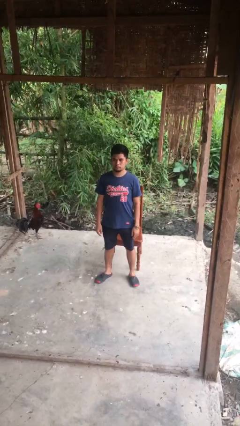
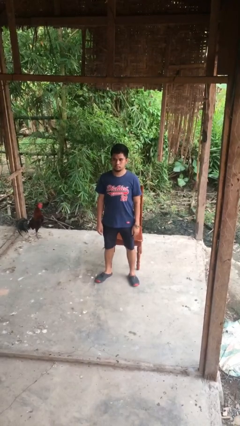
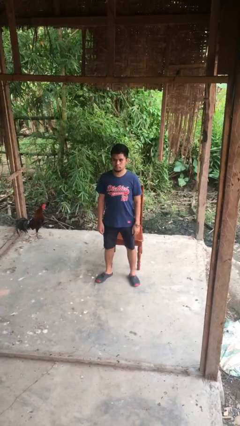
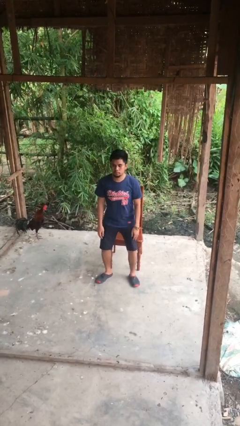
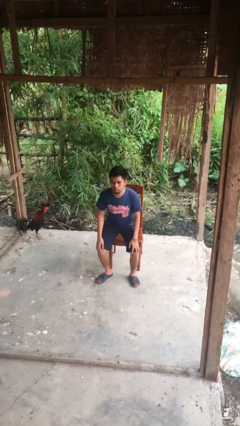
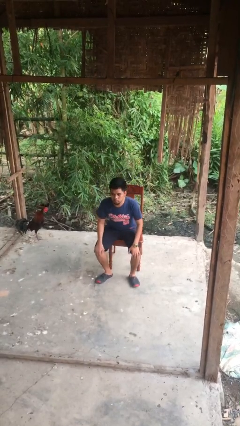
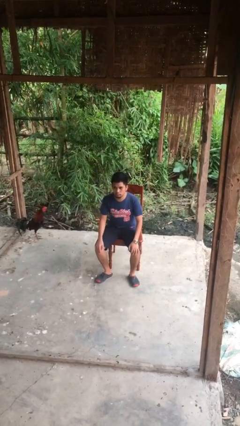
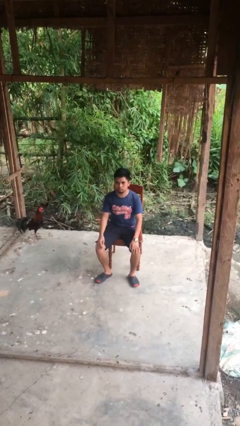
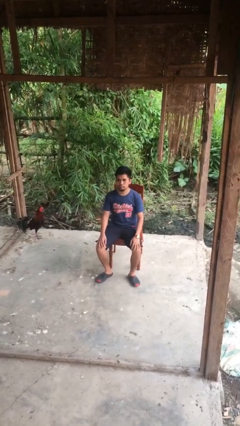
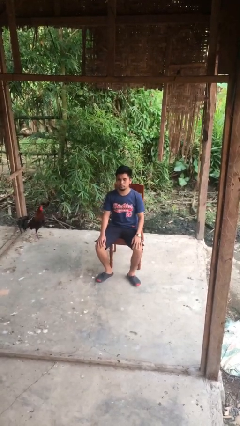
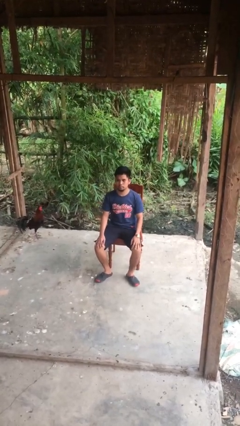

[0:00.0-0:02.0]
person sits down

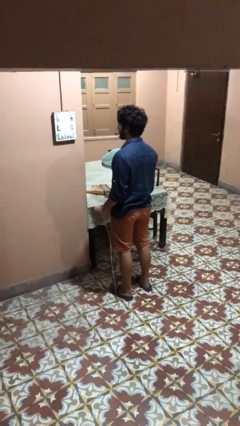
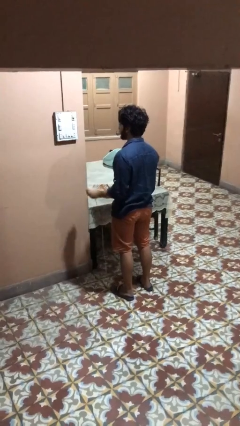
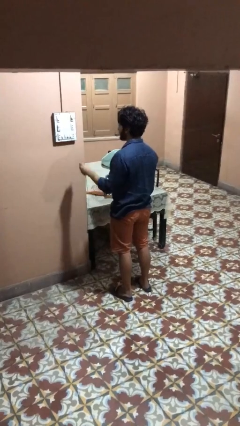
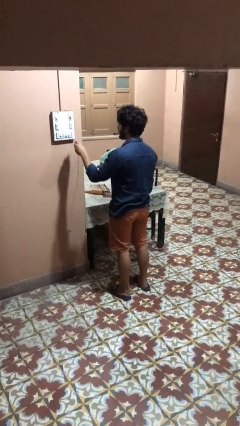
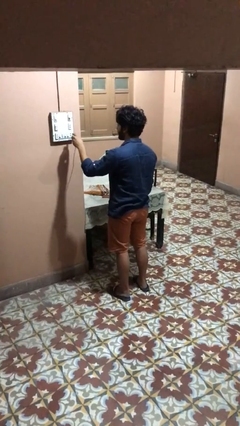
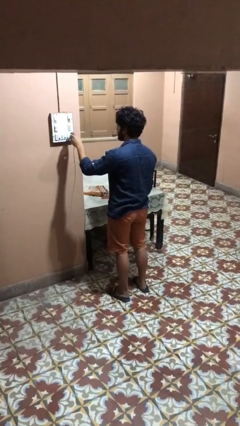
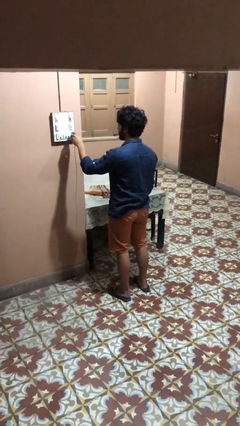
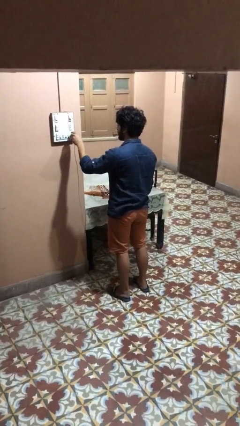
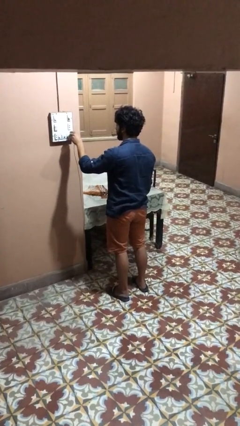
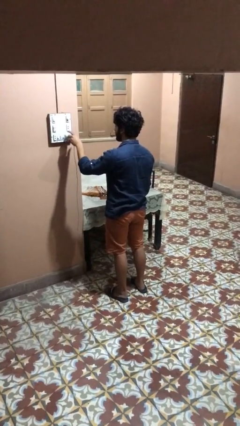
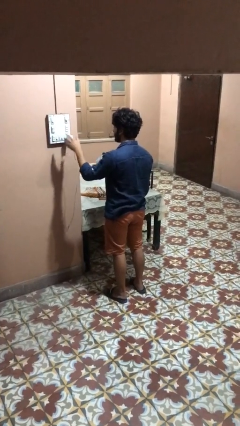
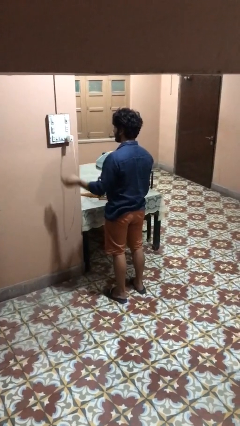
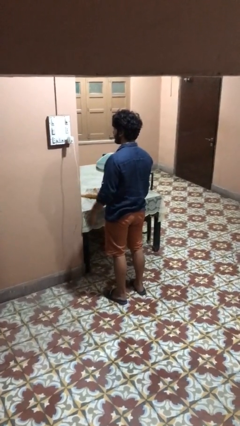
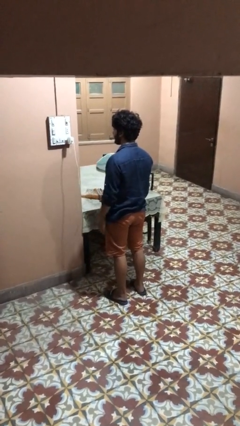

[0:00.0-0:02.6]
person plugs into electrical socket

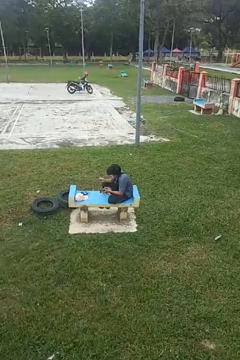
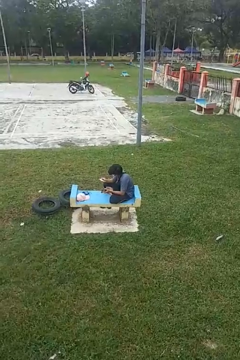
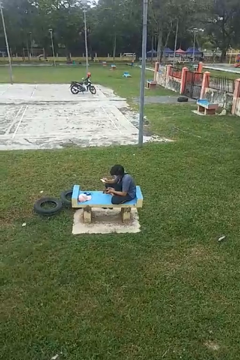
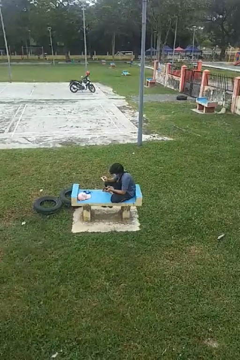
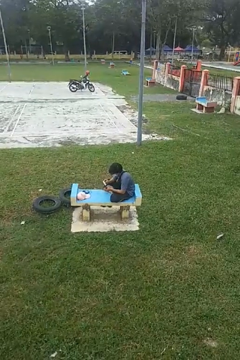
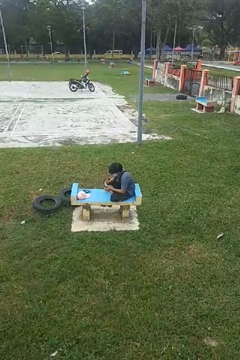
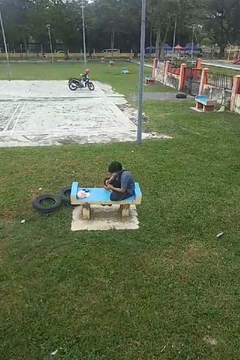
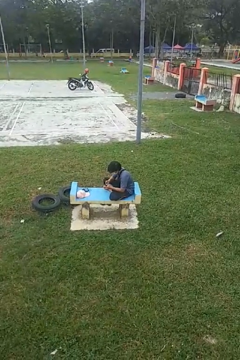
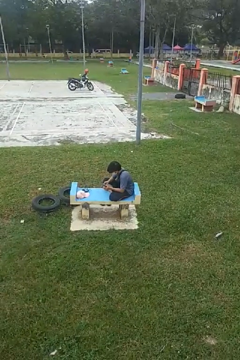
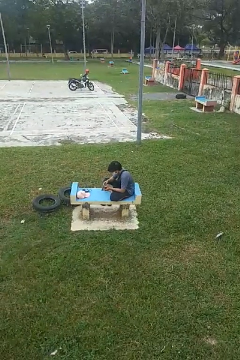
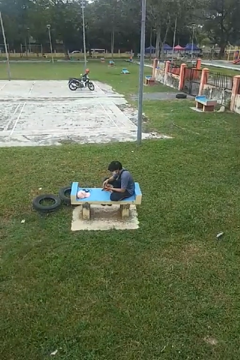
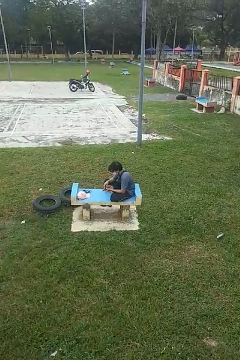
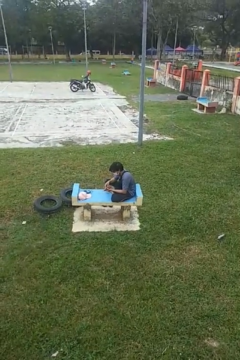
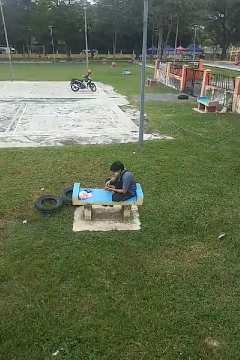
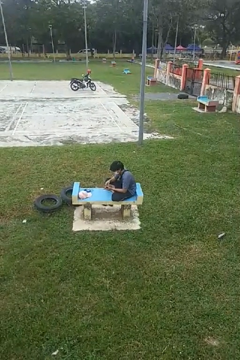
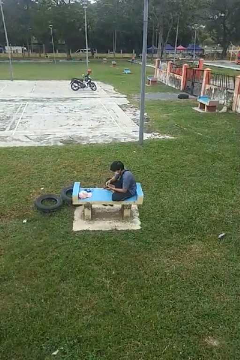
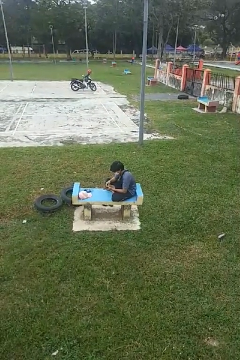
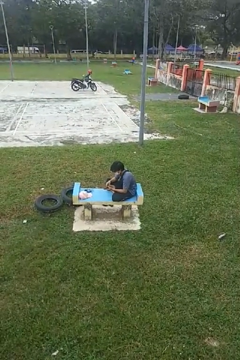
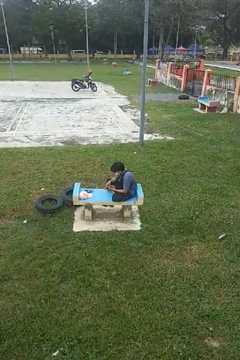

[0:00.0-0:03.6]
person puts object into purse

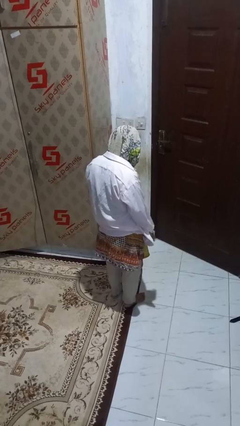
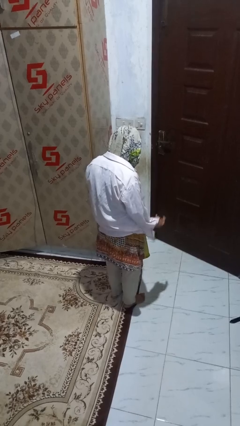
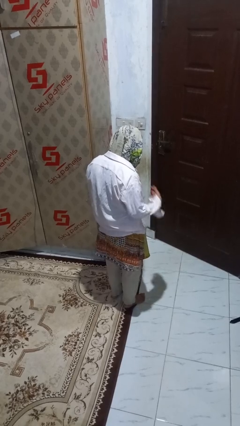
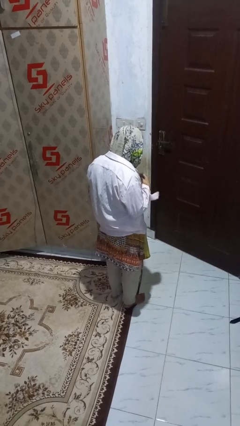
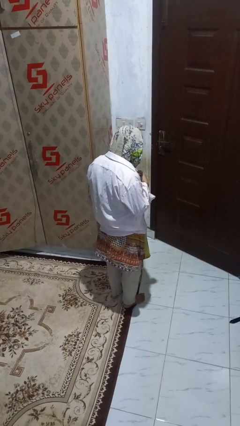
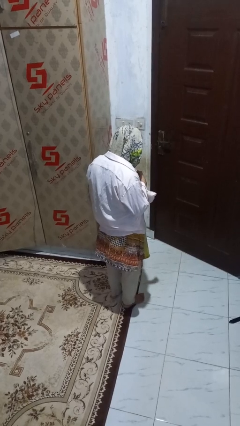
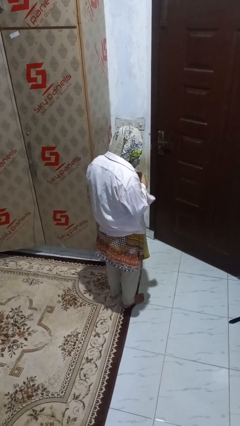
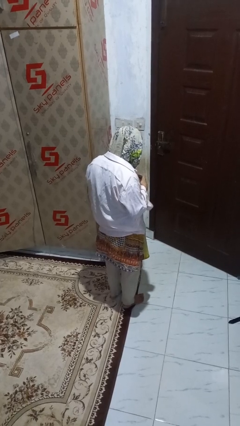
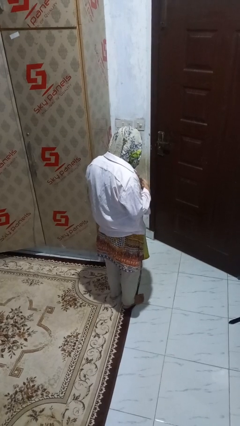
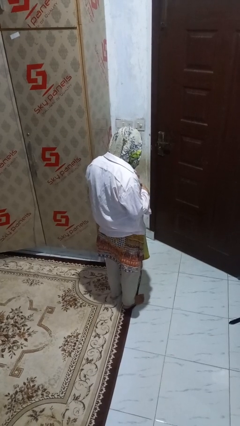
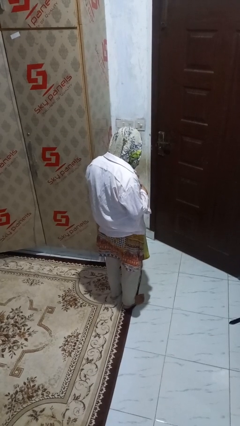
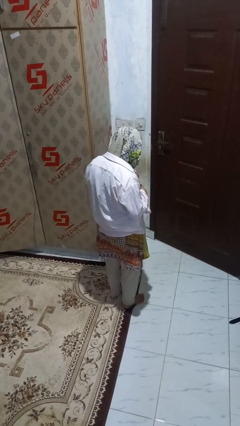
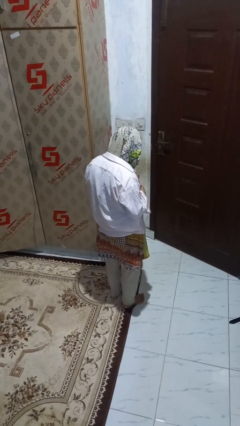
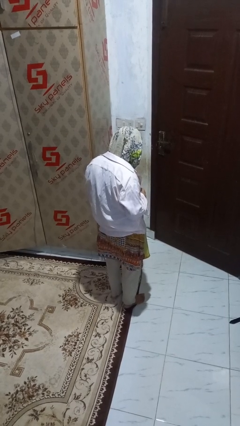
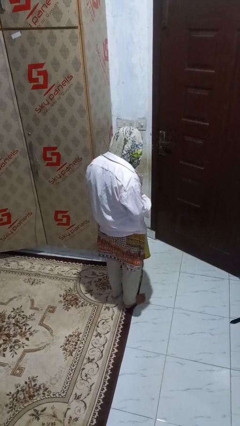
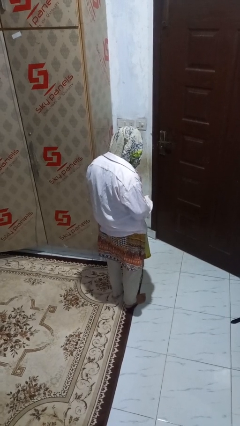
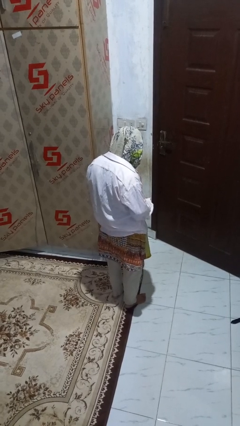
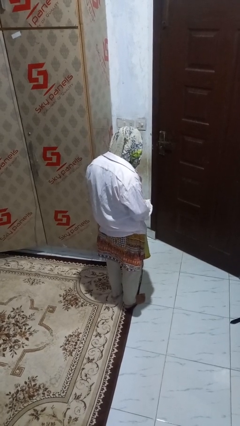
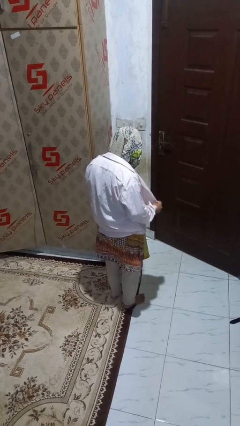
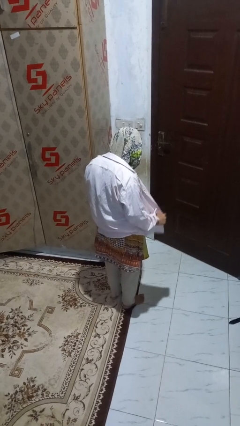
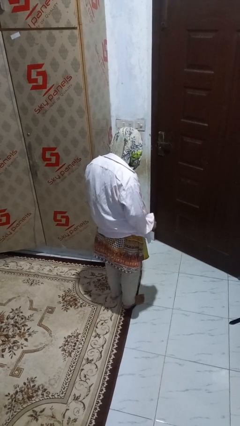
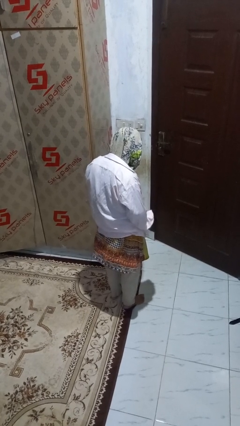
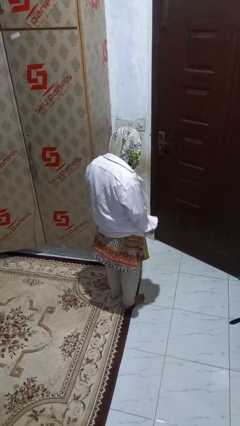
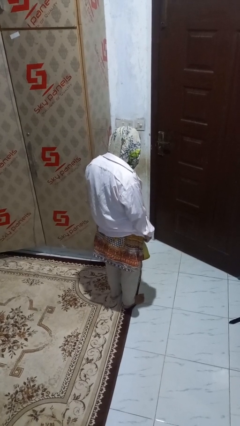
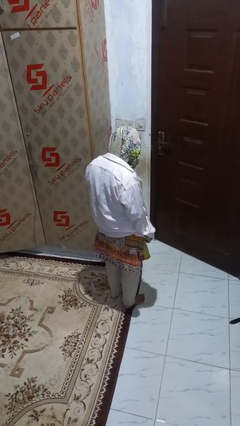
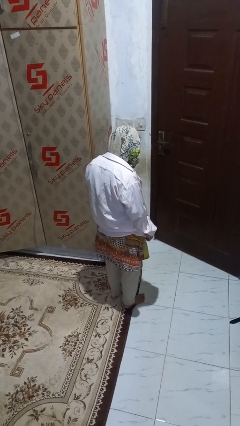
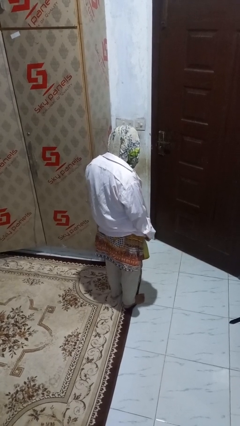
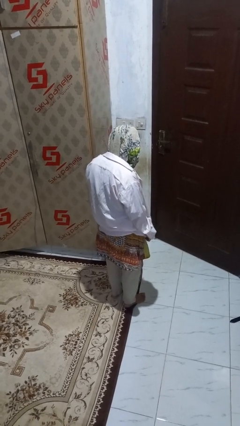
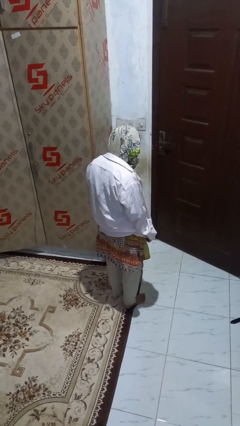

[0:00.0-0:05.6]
person unbuttons shirt

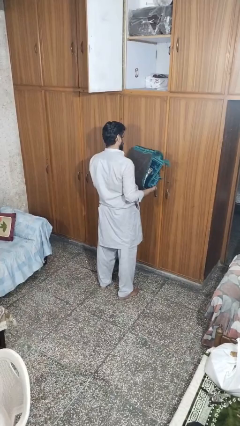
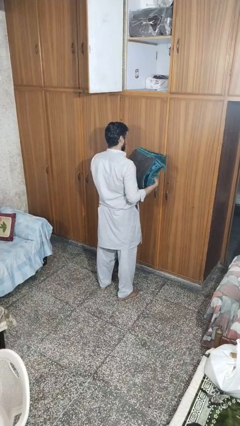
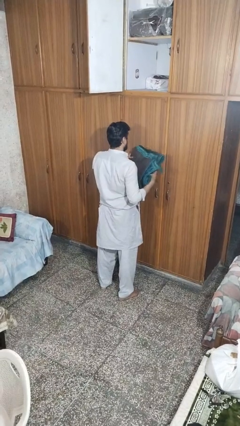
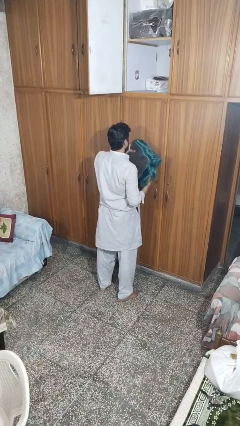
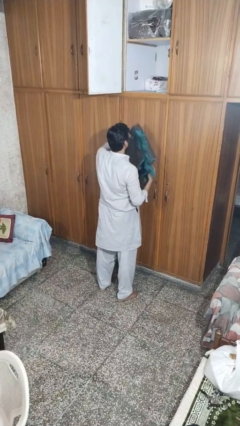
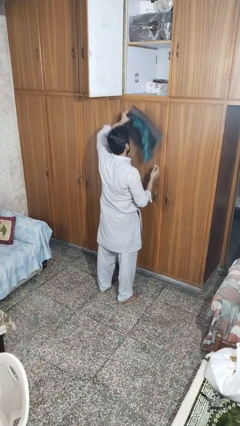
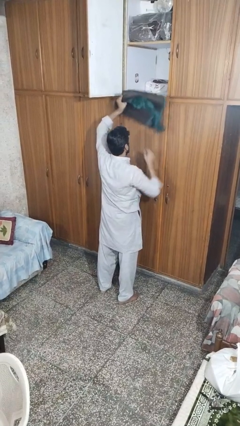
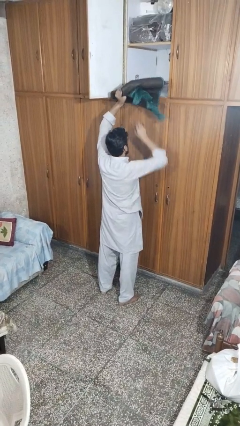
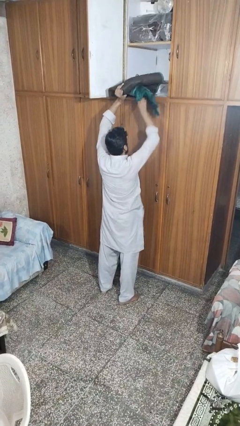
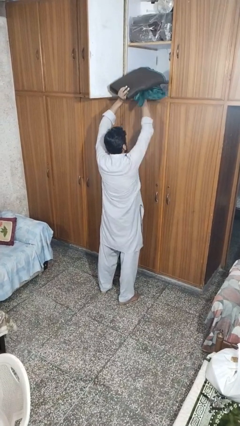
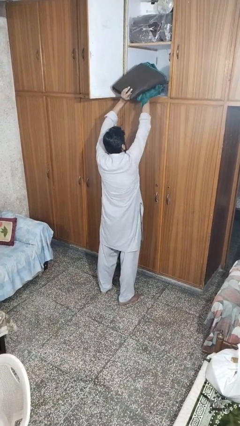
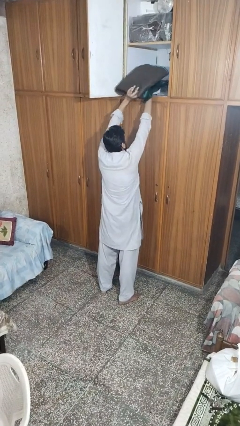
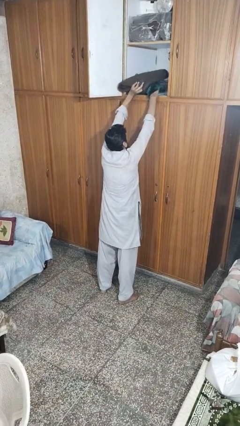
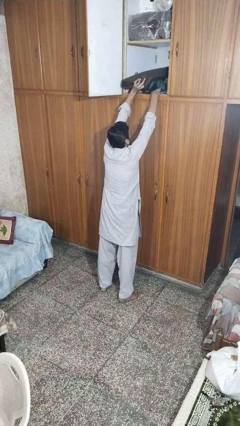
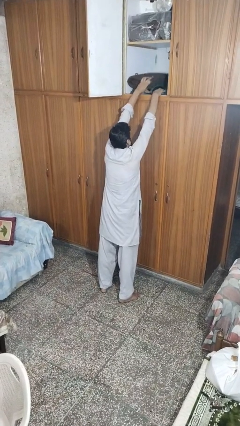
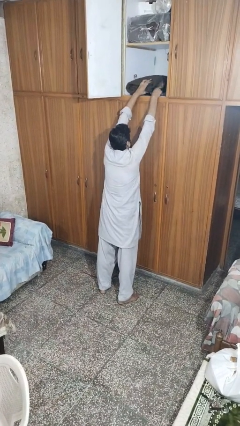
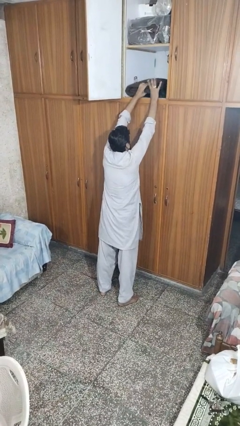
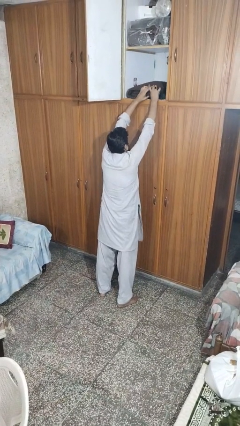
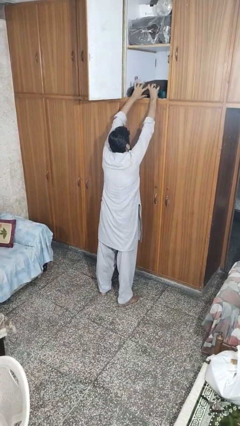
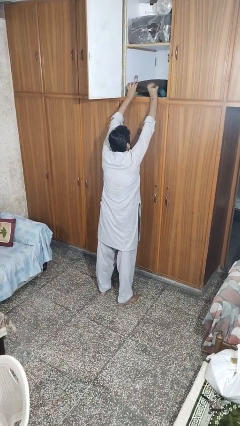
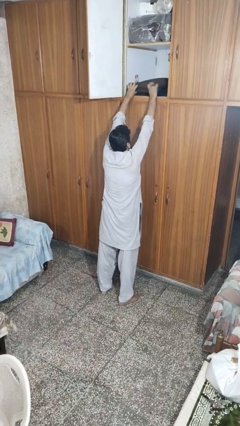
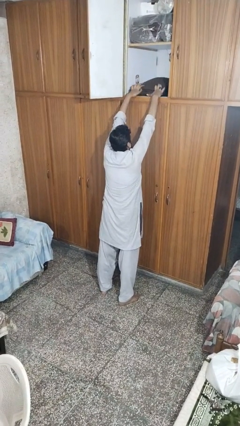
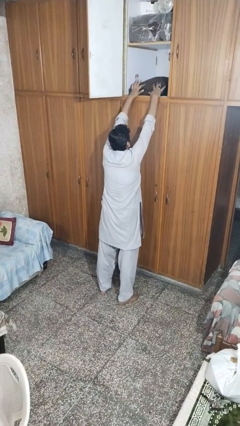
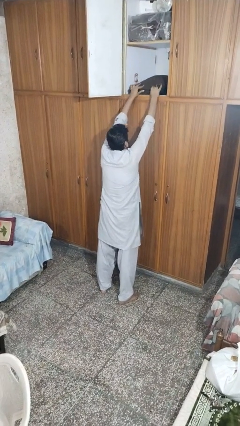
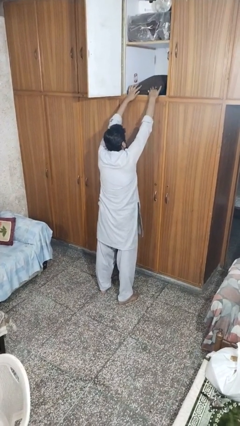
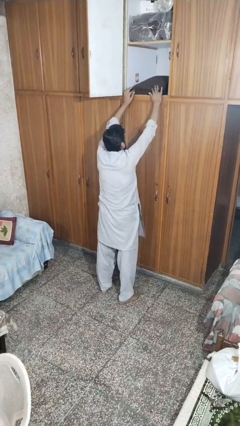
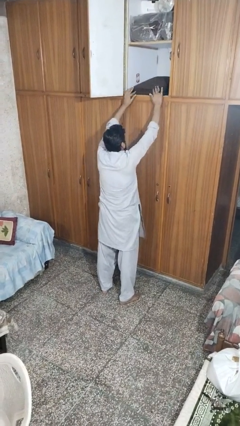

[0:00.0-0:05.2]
person puts down object on shelf
